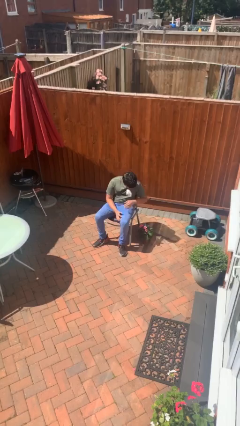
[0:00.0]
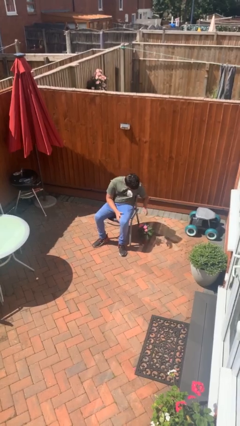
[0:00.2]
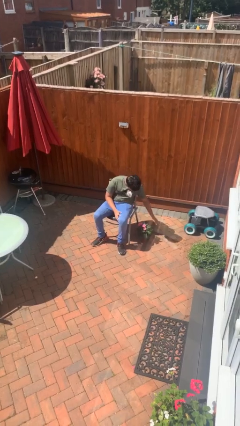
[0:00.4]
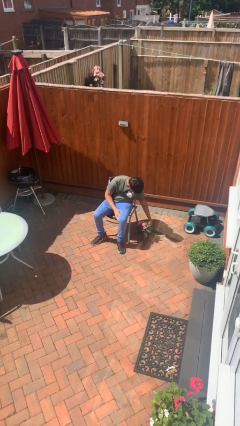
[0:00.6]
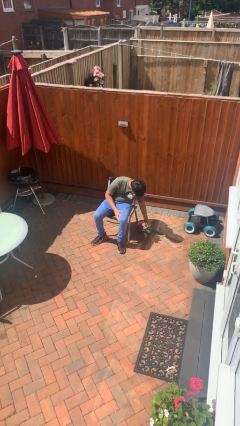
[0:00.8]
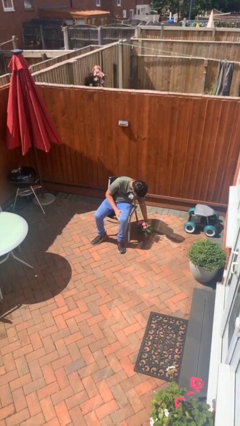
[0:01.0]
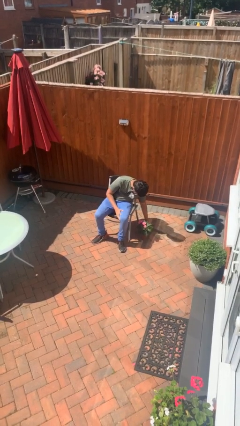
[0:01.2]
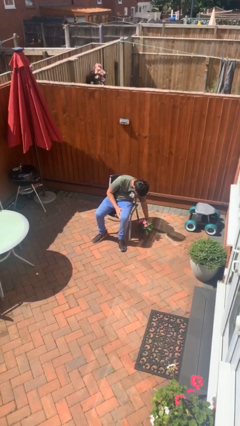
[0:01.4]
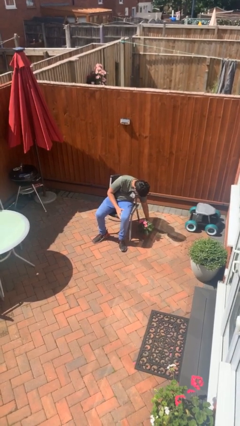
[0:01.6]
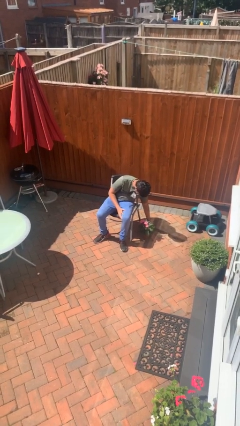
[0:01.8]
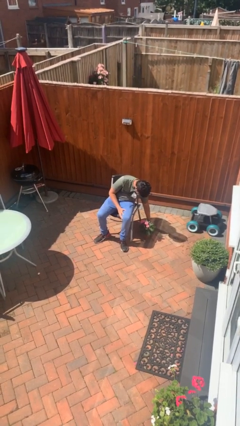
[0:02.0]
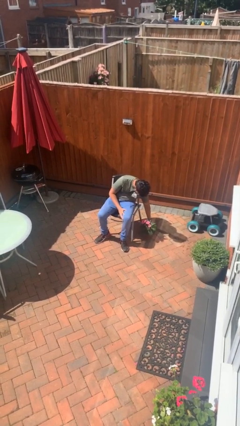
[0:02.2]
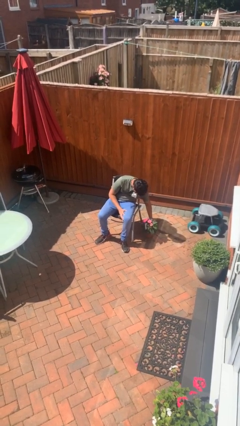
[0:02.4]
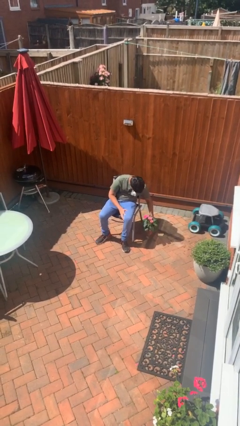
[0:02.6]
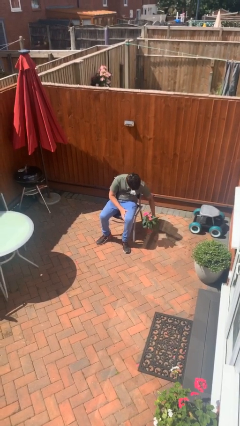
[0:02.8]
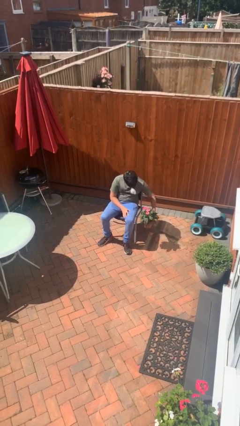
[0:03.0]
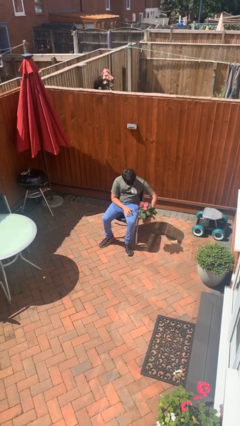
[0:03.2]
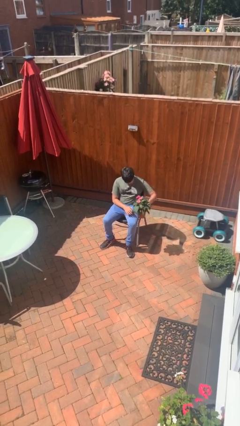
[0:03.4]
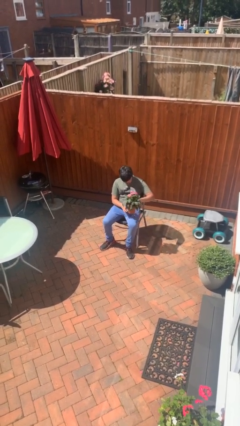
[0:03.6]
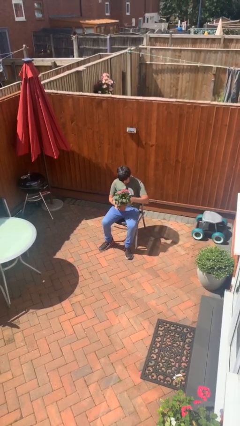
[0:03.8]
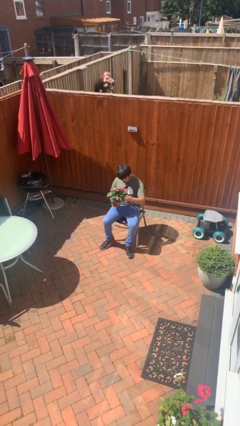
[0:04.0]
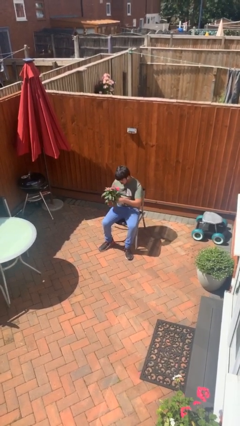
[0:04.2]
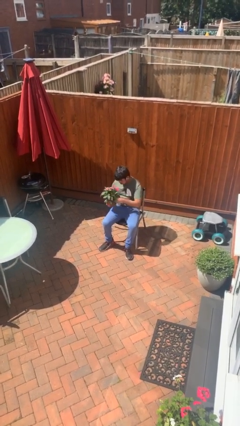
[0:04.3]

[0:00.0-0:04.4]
person picks up object from floor

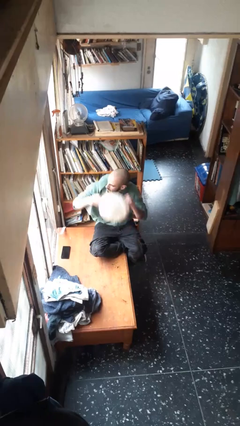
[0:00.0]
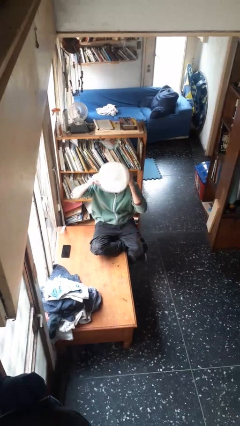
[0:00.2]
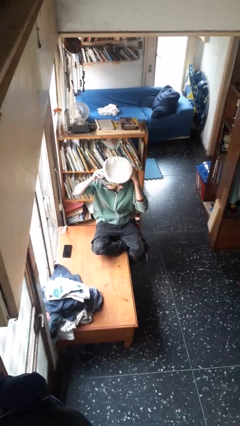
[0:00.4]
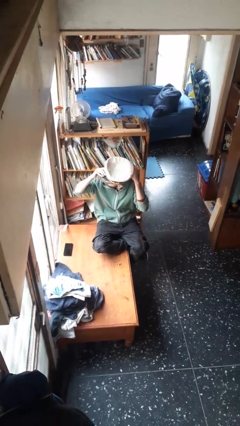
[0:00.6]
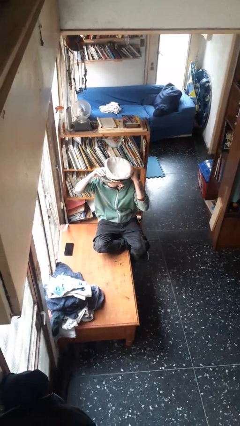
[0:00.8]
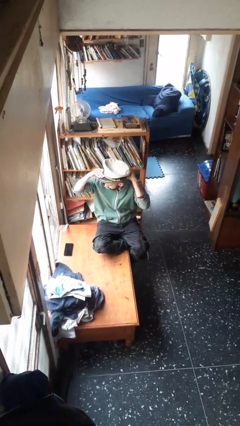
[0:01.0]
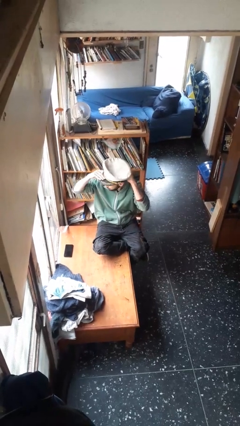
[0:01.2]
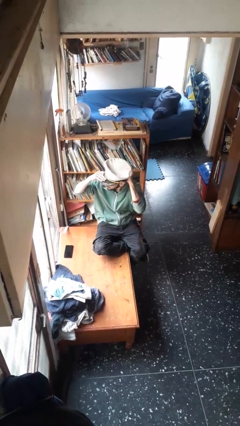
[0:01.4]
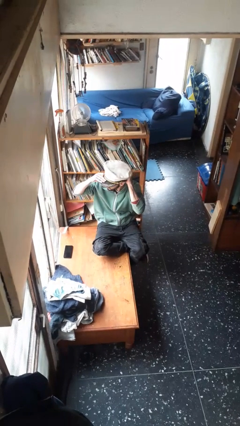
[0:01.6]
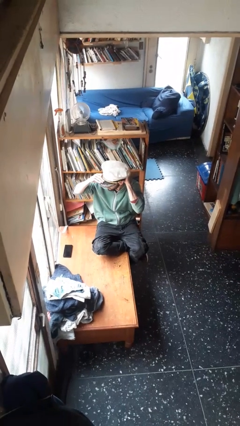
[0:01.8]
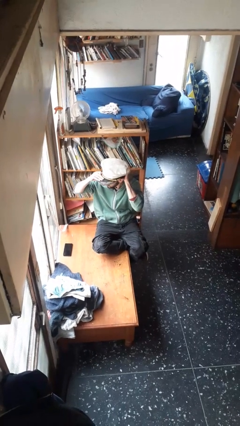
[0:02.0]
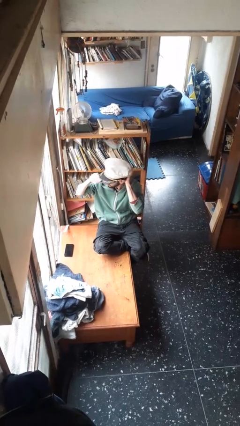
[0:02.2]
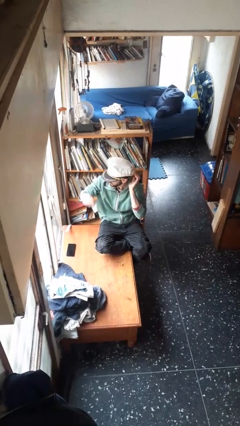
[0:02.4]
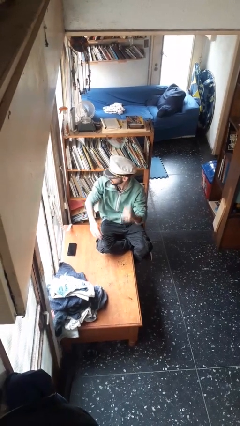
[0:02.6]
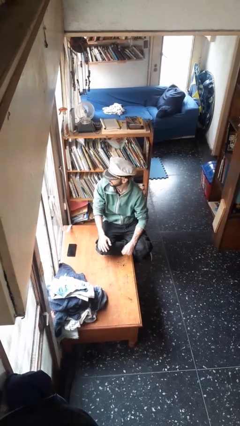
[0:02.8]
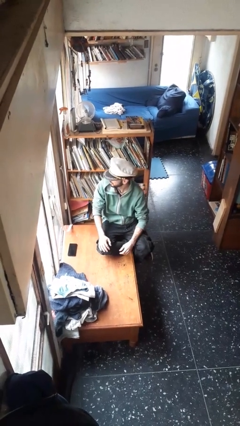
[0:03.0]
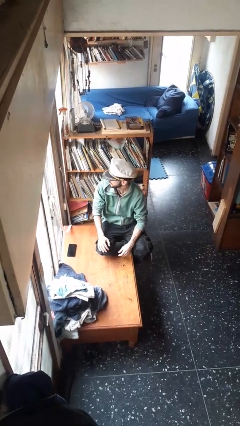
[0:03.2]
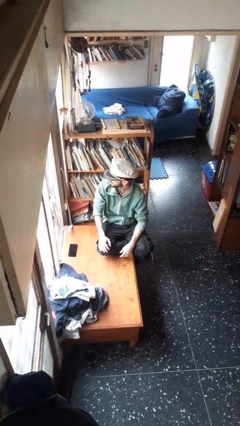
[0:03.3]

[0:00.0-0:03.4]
person puts on hat

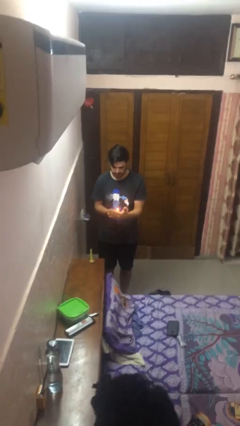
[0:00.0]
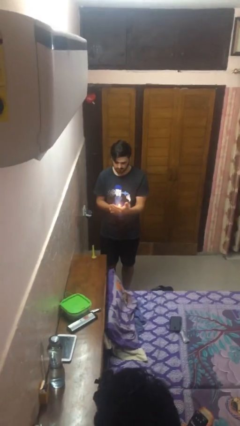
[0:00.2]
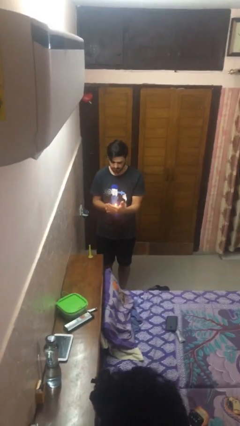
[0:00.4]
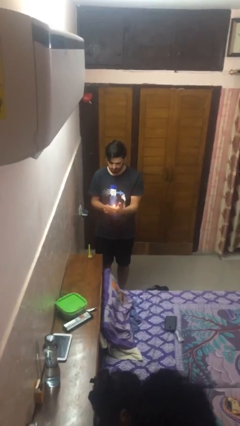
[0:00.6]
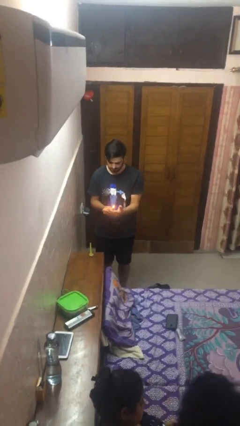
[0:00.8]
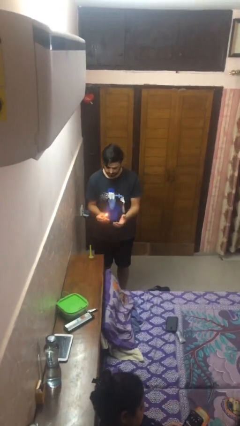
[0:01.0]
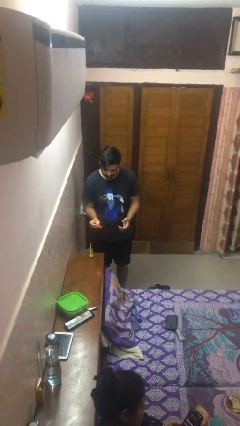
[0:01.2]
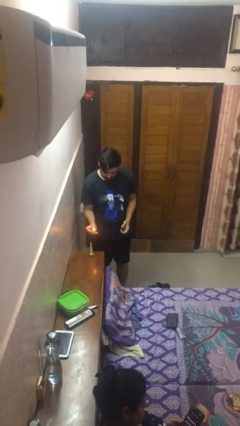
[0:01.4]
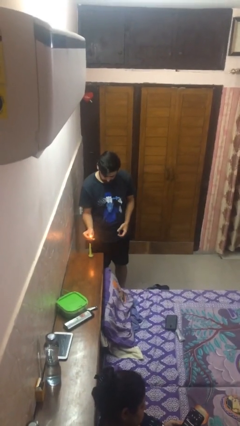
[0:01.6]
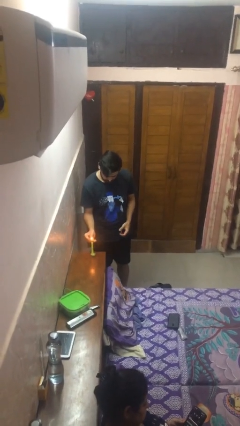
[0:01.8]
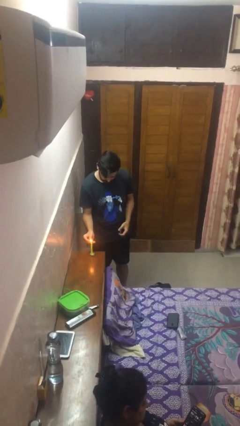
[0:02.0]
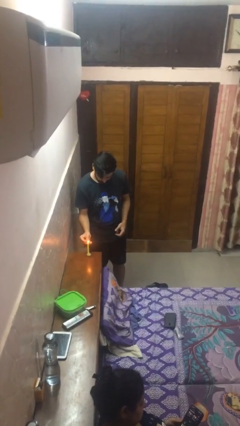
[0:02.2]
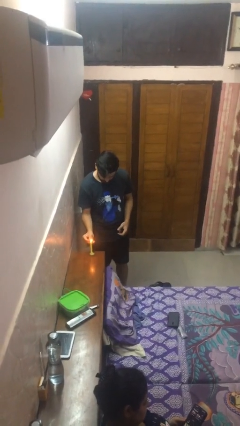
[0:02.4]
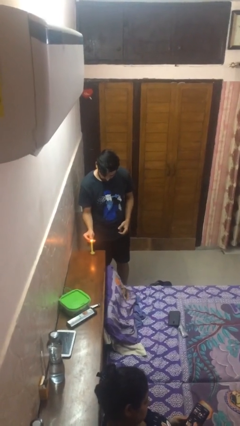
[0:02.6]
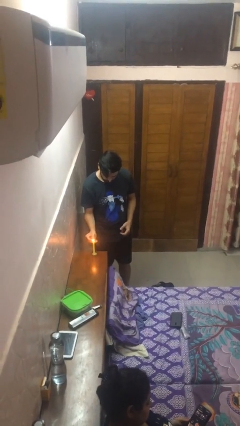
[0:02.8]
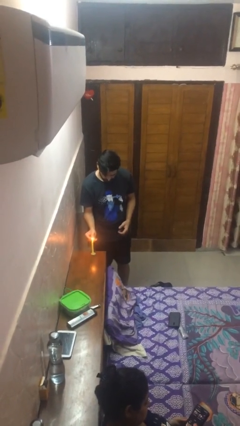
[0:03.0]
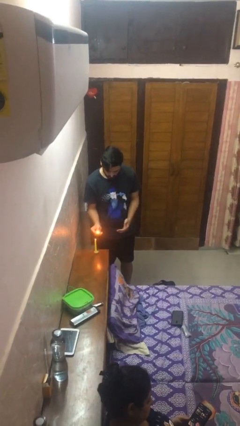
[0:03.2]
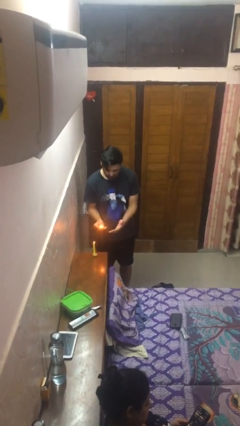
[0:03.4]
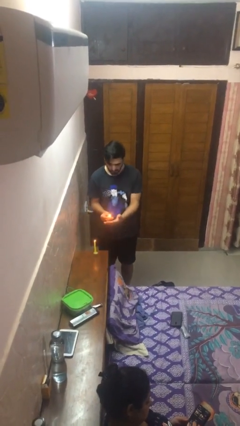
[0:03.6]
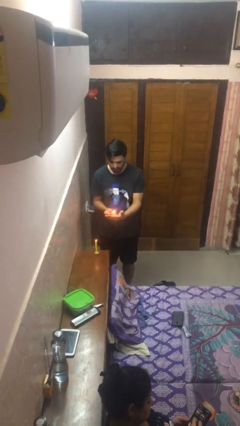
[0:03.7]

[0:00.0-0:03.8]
person lights candle

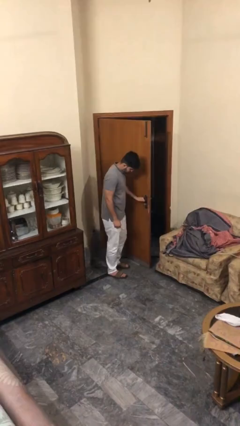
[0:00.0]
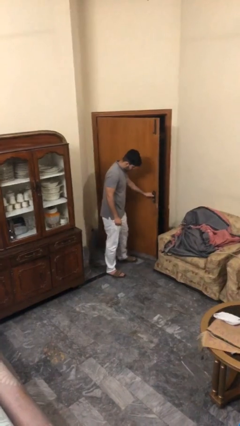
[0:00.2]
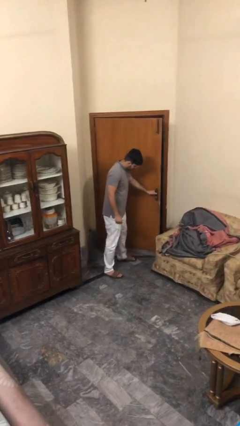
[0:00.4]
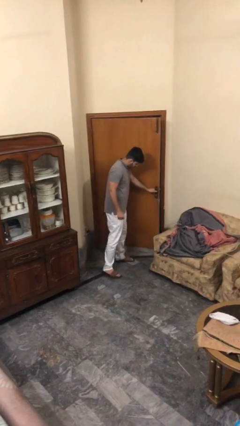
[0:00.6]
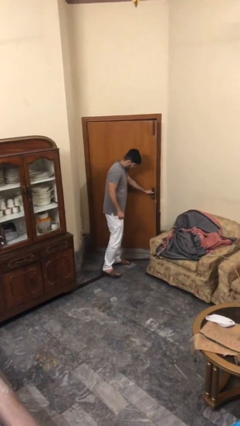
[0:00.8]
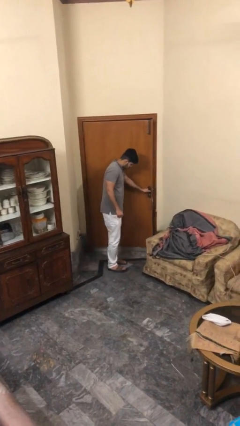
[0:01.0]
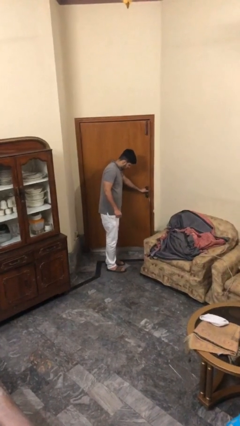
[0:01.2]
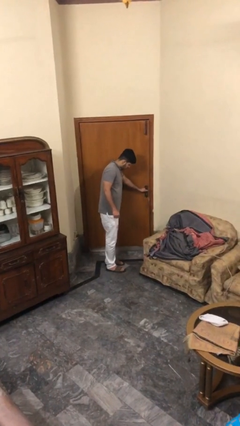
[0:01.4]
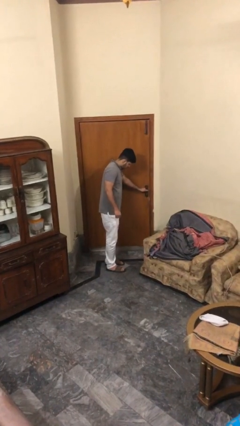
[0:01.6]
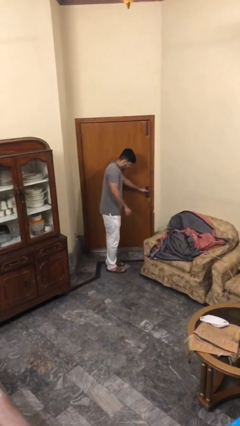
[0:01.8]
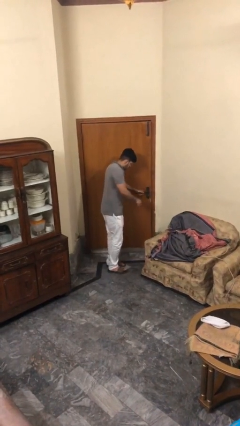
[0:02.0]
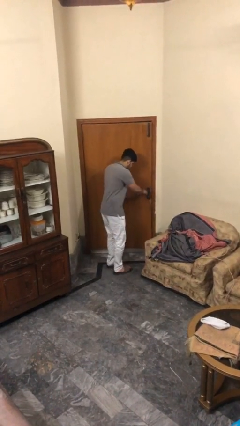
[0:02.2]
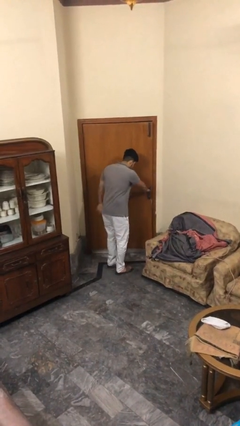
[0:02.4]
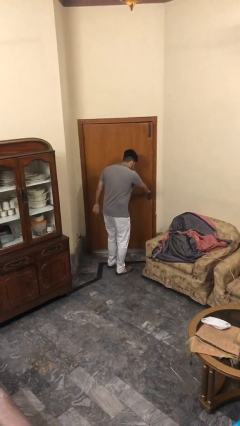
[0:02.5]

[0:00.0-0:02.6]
person closes facility door

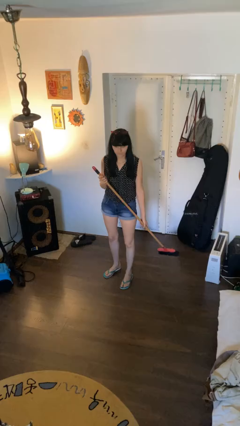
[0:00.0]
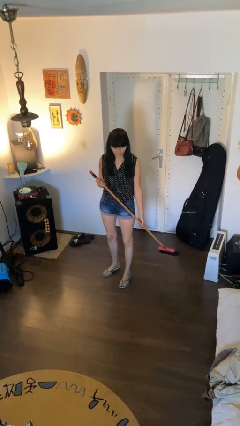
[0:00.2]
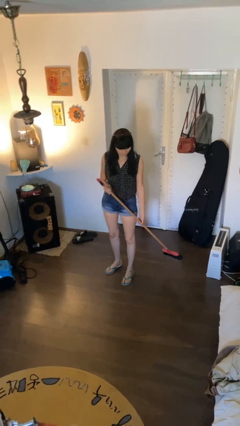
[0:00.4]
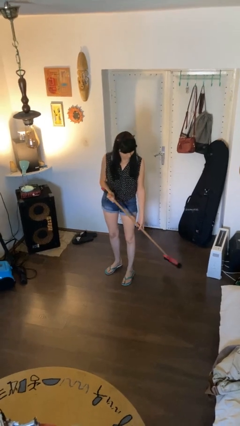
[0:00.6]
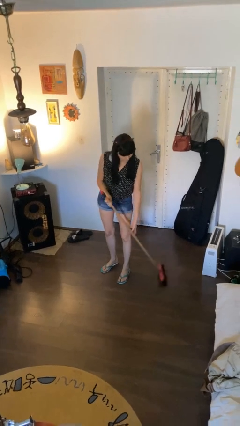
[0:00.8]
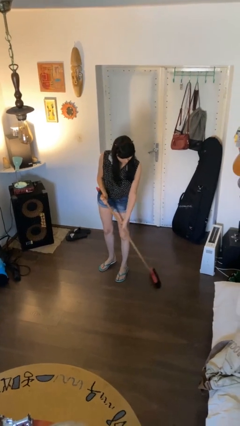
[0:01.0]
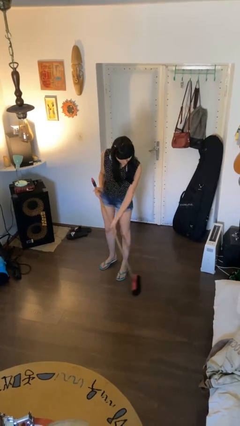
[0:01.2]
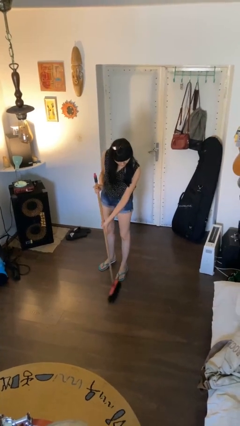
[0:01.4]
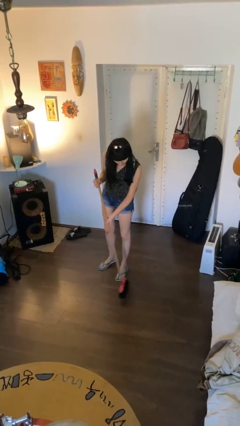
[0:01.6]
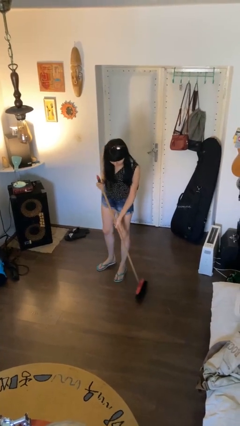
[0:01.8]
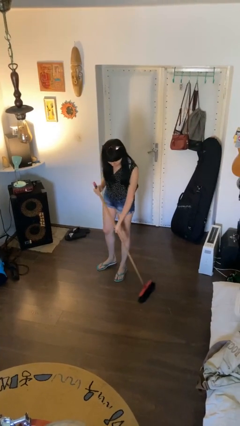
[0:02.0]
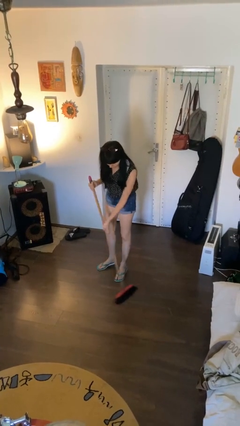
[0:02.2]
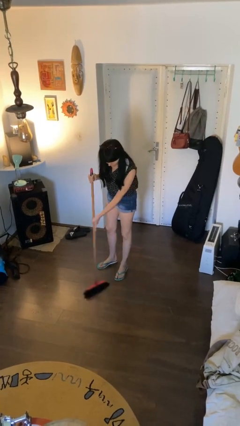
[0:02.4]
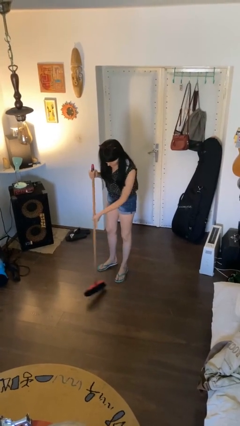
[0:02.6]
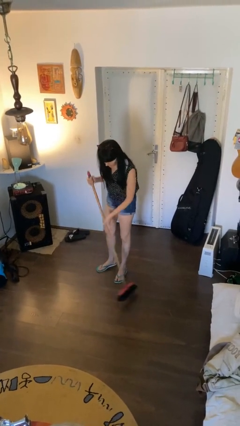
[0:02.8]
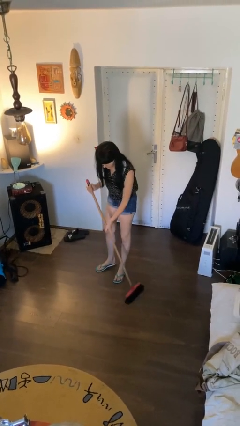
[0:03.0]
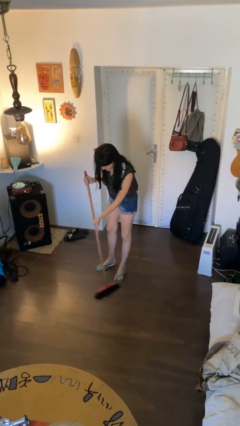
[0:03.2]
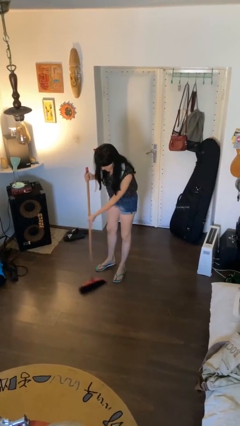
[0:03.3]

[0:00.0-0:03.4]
person sweeps floor
